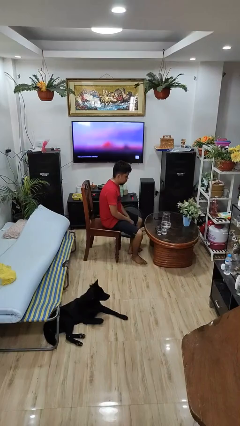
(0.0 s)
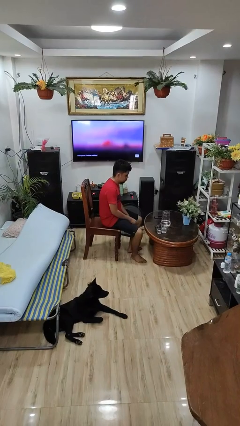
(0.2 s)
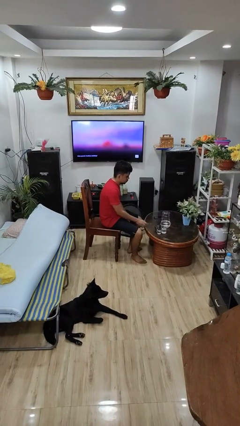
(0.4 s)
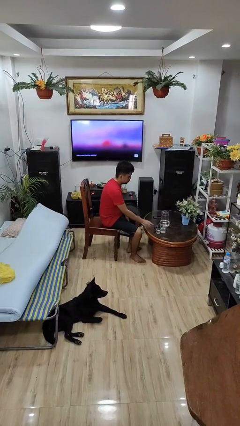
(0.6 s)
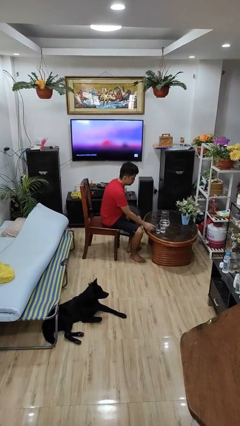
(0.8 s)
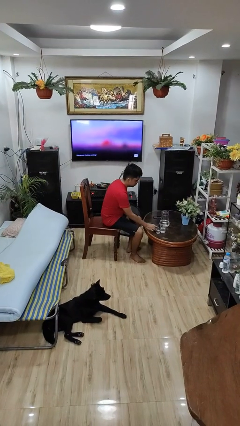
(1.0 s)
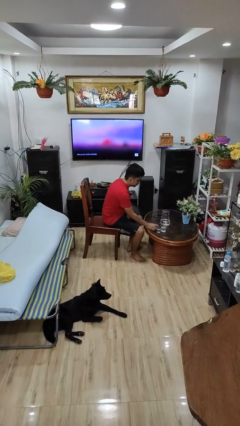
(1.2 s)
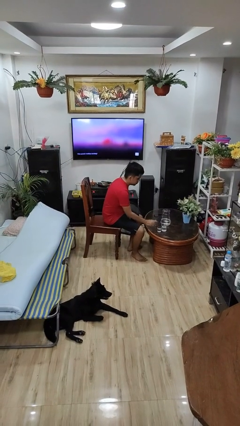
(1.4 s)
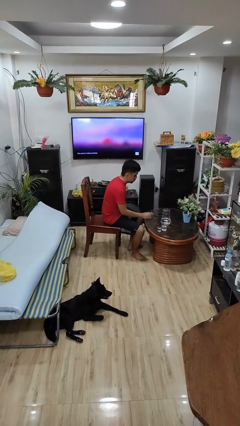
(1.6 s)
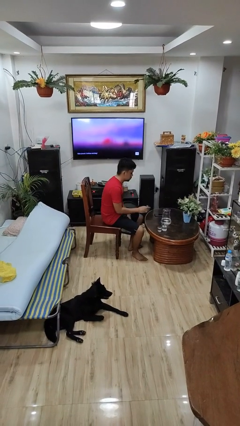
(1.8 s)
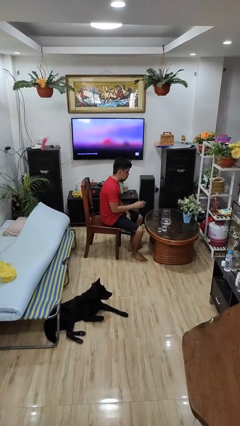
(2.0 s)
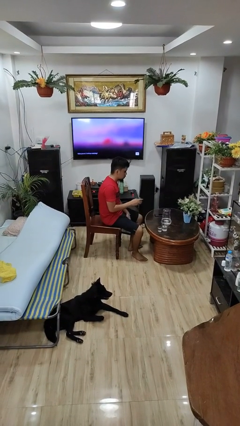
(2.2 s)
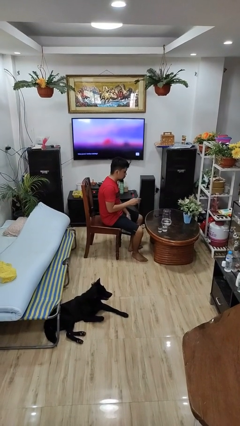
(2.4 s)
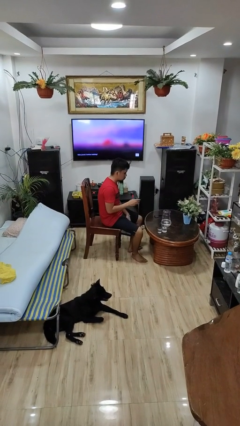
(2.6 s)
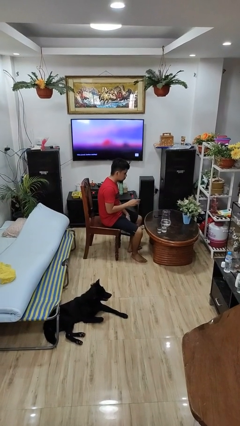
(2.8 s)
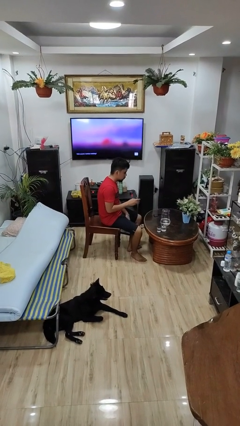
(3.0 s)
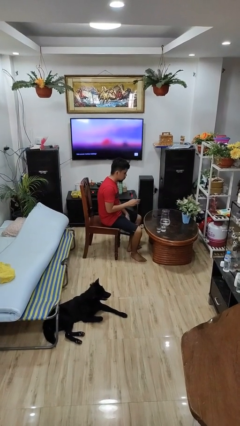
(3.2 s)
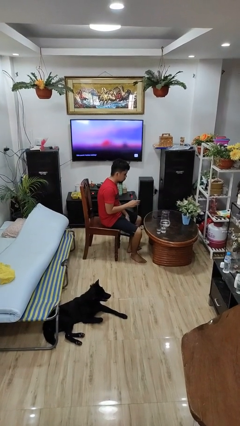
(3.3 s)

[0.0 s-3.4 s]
person picks up object from table

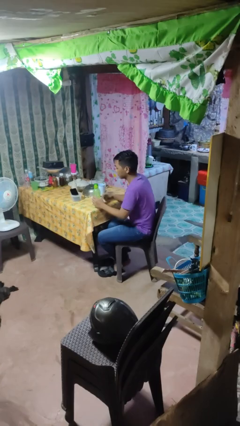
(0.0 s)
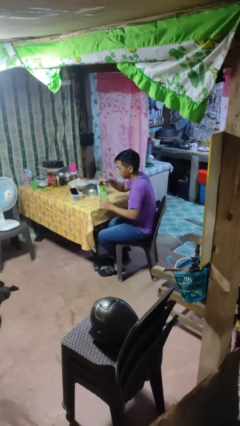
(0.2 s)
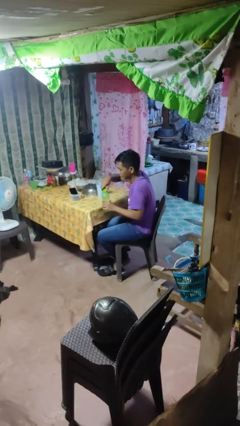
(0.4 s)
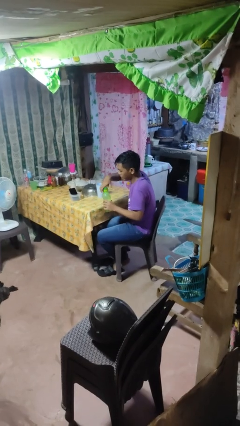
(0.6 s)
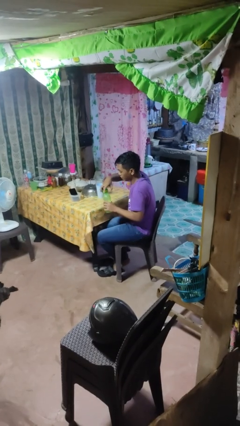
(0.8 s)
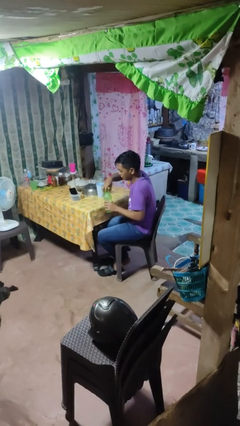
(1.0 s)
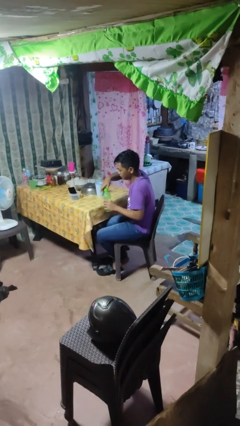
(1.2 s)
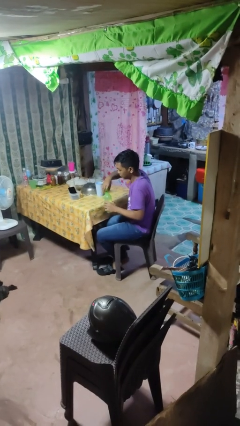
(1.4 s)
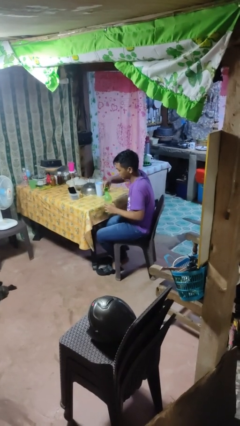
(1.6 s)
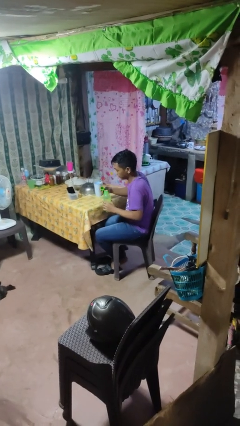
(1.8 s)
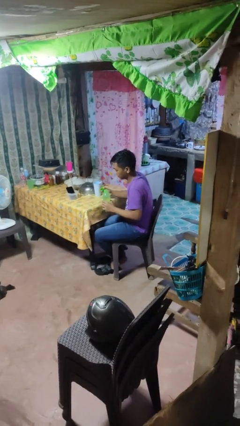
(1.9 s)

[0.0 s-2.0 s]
person unscrews lid from bottle

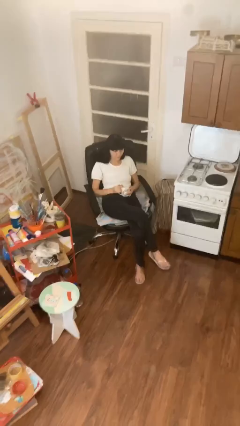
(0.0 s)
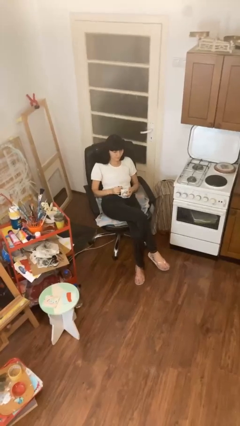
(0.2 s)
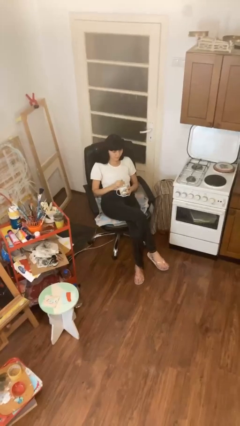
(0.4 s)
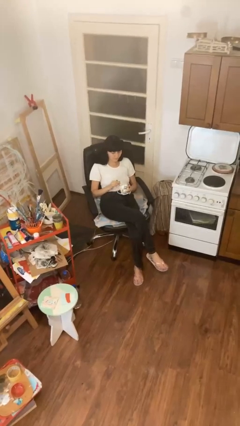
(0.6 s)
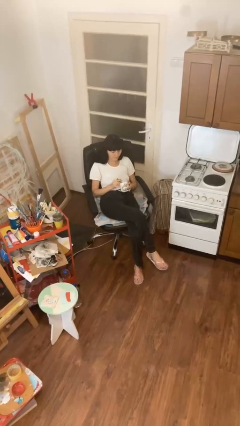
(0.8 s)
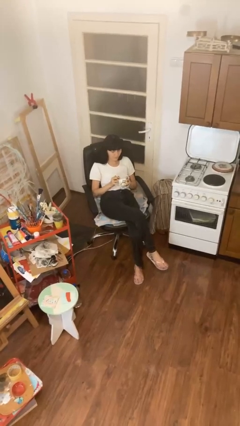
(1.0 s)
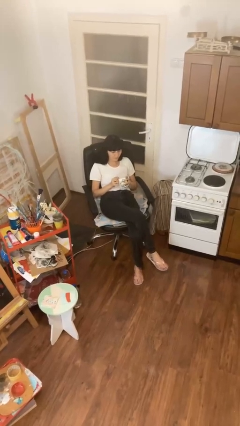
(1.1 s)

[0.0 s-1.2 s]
person stirs mug

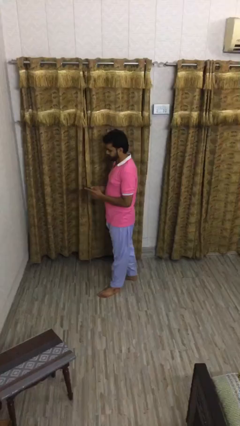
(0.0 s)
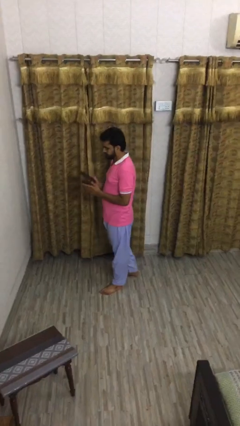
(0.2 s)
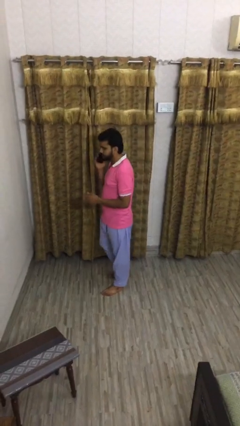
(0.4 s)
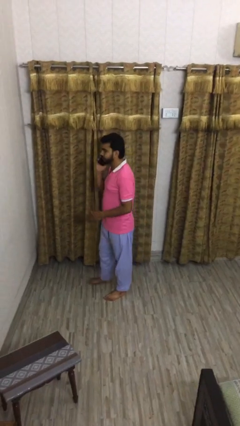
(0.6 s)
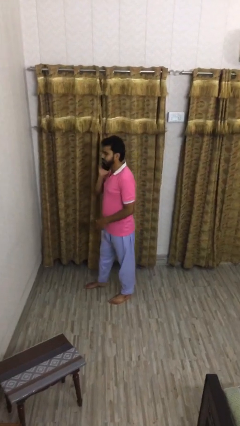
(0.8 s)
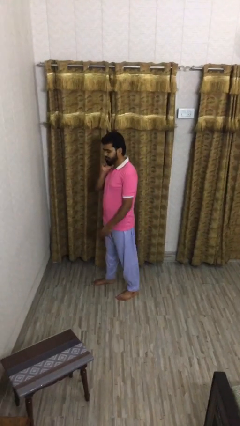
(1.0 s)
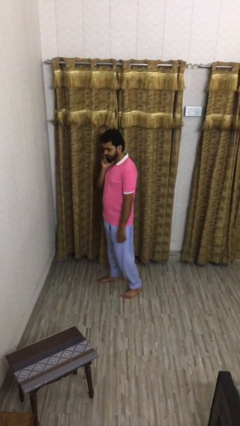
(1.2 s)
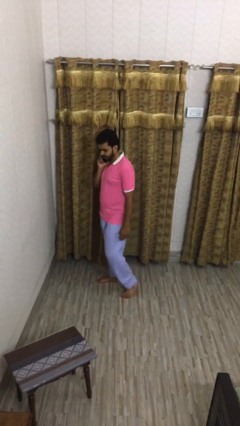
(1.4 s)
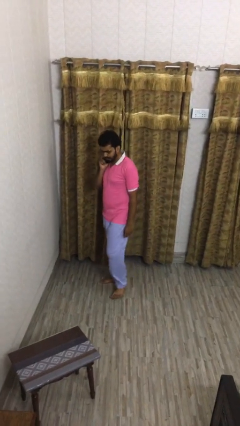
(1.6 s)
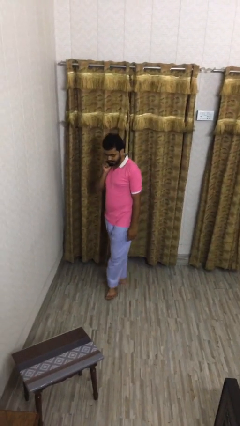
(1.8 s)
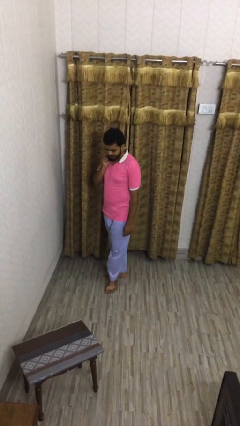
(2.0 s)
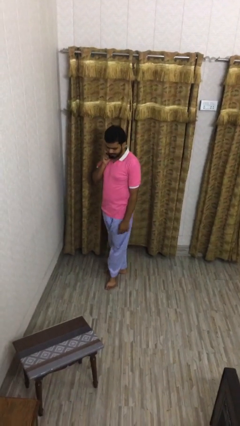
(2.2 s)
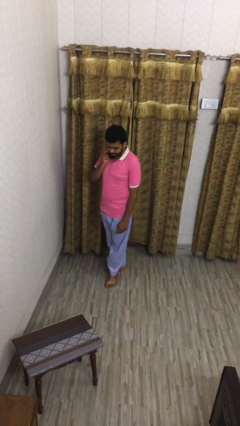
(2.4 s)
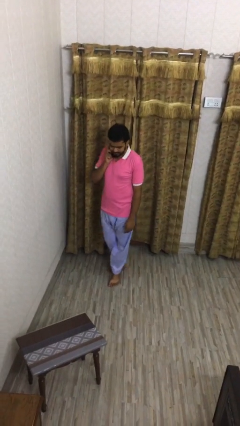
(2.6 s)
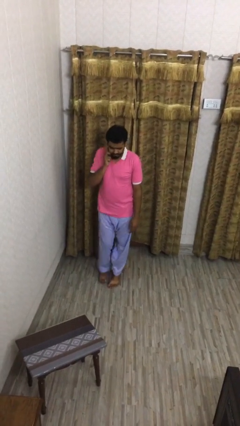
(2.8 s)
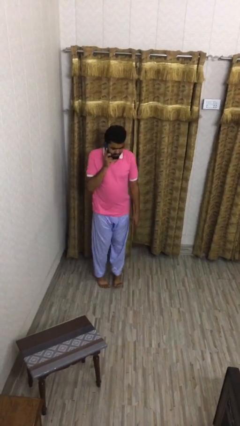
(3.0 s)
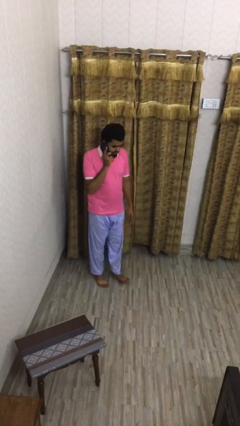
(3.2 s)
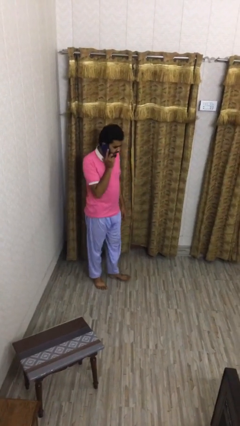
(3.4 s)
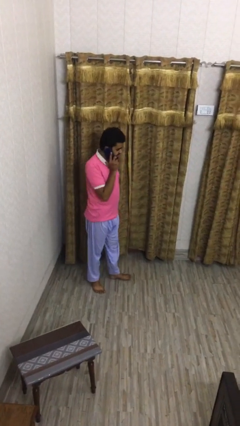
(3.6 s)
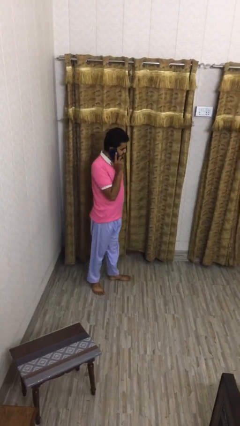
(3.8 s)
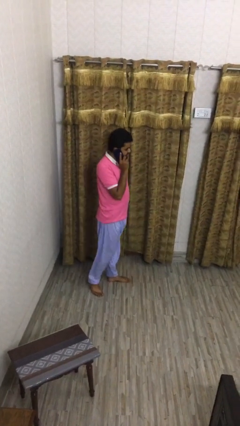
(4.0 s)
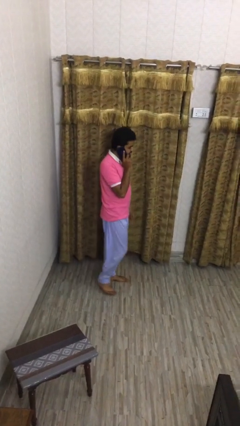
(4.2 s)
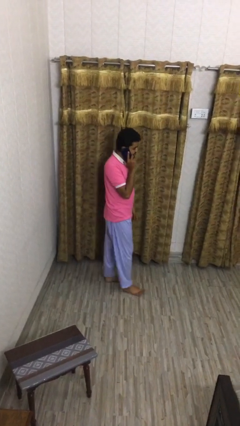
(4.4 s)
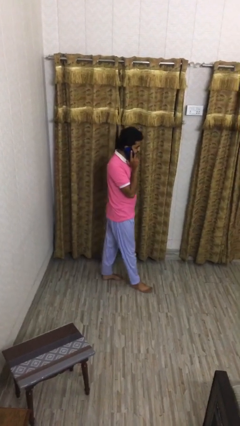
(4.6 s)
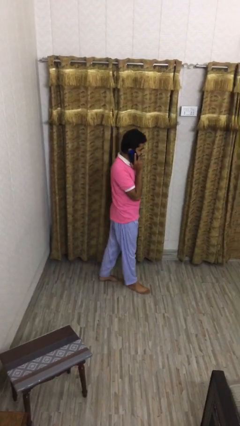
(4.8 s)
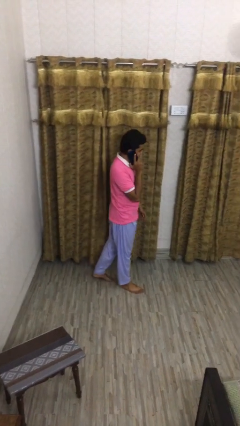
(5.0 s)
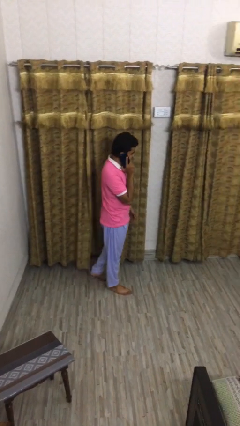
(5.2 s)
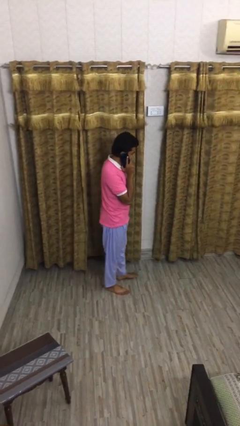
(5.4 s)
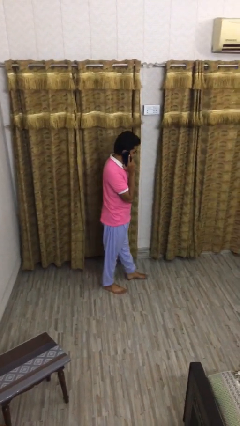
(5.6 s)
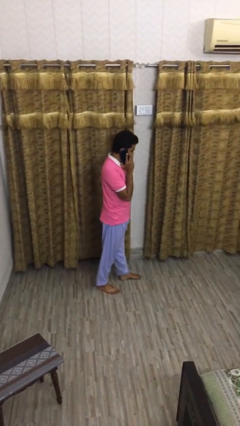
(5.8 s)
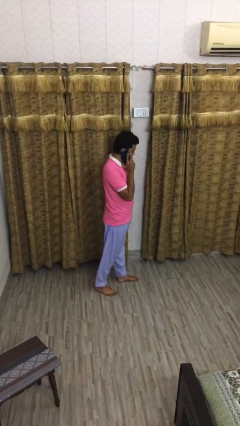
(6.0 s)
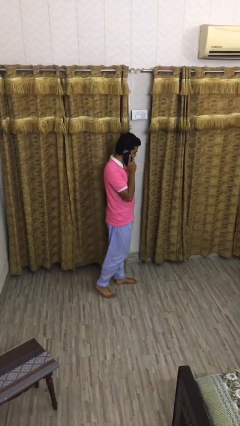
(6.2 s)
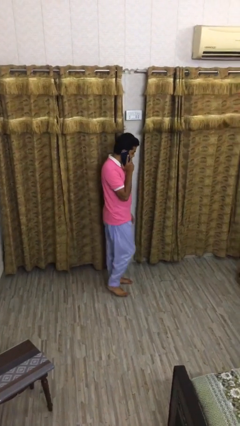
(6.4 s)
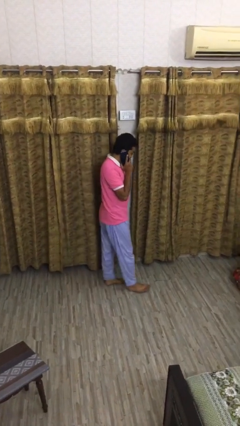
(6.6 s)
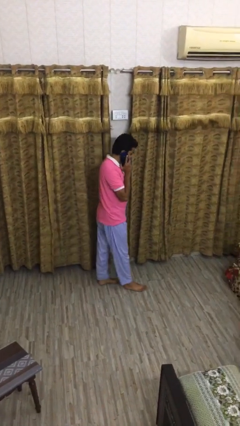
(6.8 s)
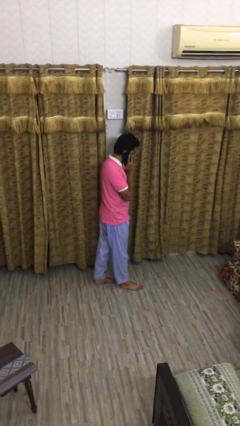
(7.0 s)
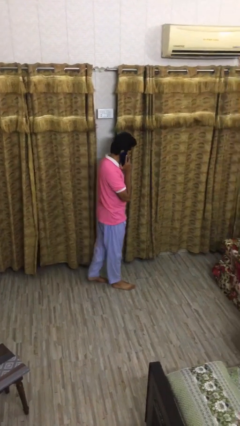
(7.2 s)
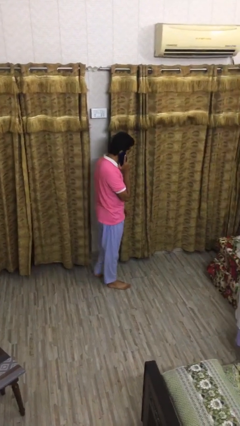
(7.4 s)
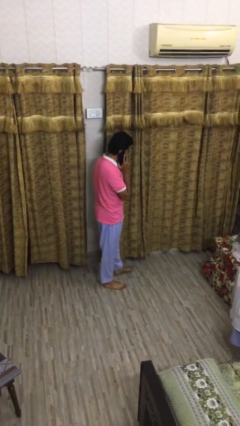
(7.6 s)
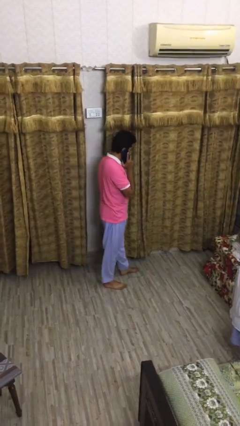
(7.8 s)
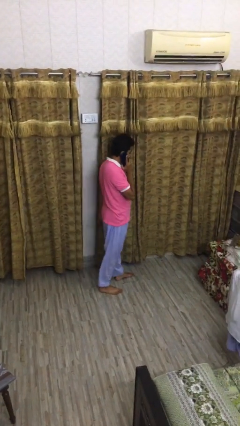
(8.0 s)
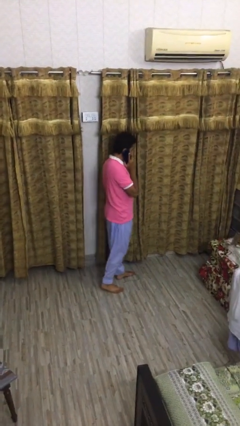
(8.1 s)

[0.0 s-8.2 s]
person talks on phone

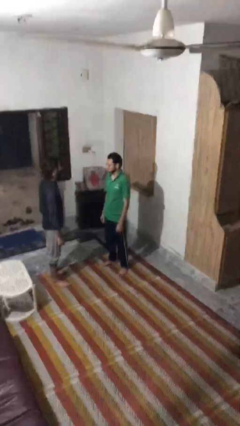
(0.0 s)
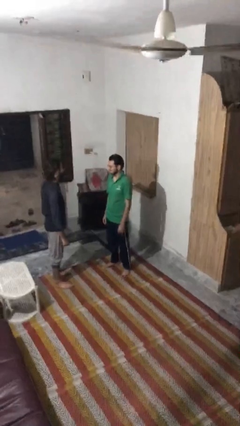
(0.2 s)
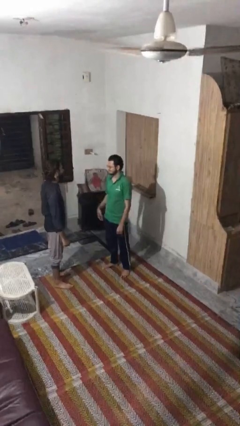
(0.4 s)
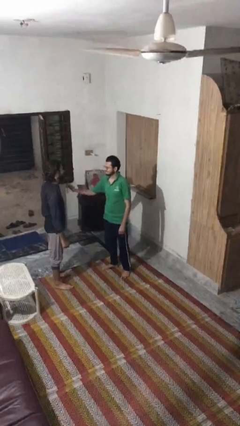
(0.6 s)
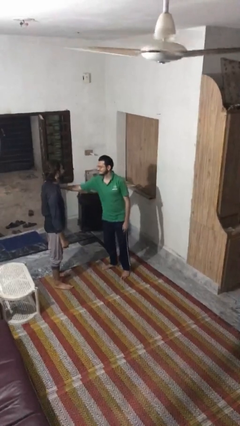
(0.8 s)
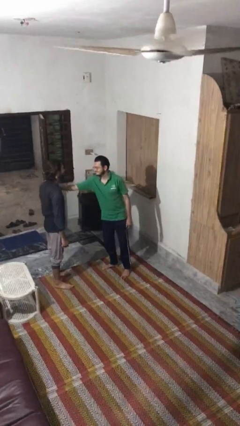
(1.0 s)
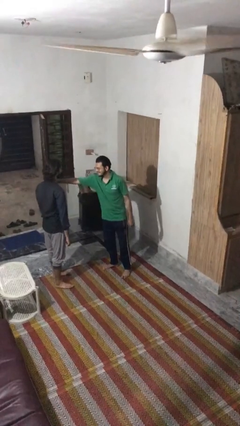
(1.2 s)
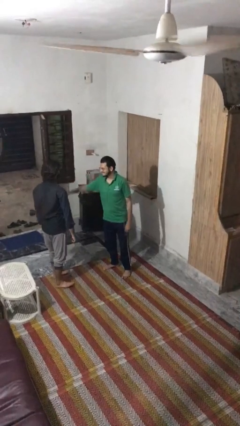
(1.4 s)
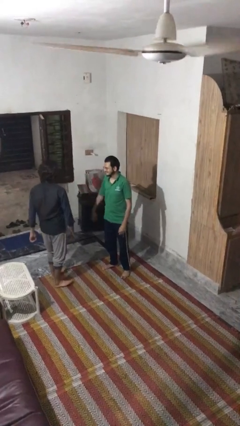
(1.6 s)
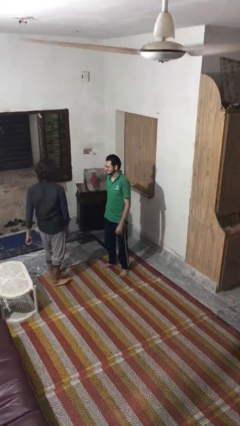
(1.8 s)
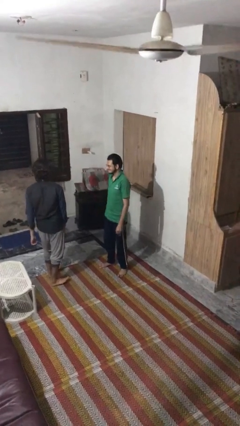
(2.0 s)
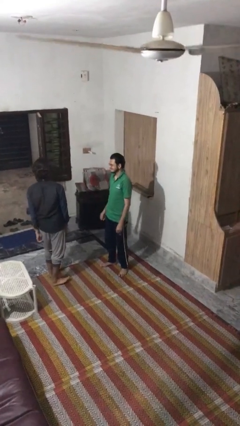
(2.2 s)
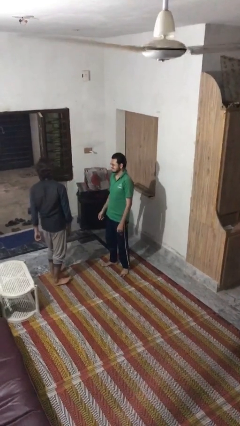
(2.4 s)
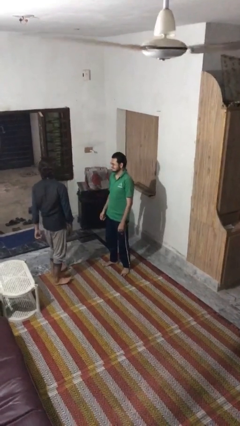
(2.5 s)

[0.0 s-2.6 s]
person shoves person
